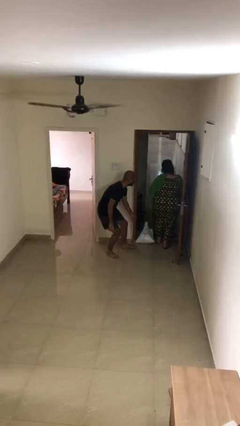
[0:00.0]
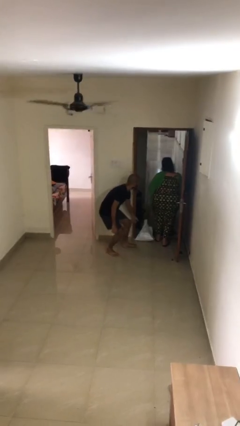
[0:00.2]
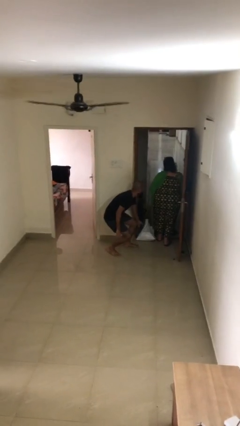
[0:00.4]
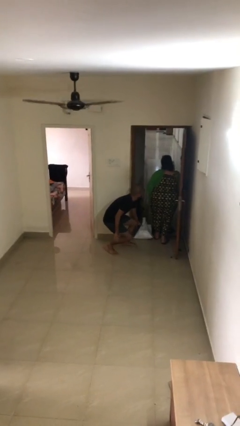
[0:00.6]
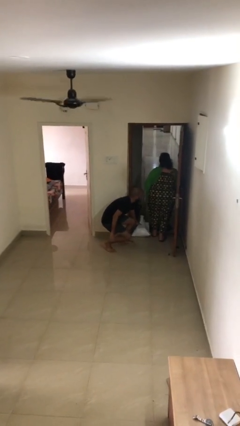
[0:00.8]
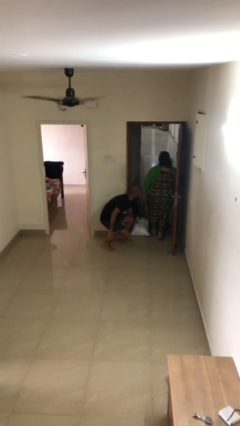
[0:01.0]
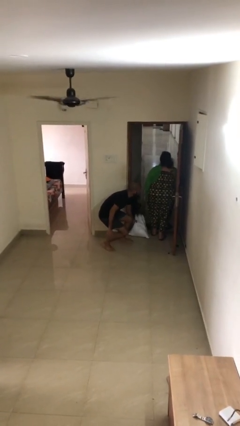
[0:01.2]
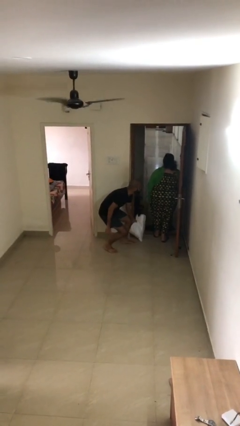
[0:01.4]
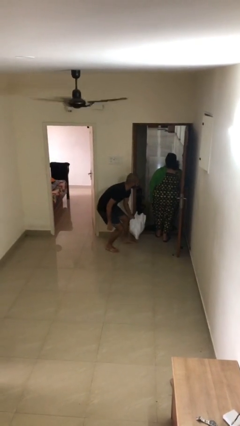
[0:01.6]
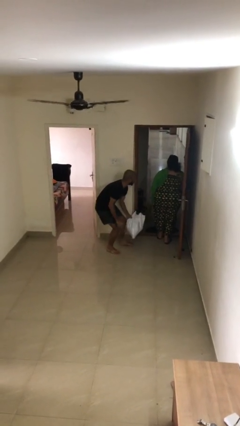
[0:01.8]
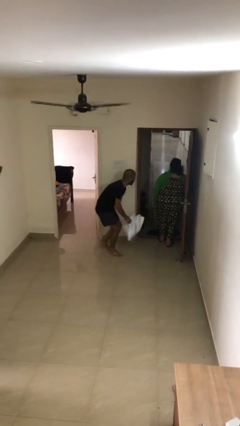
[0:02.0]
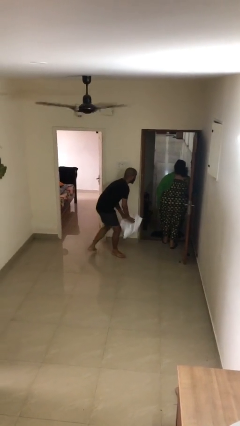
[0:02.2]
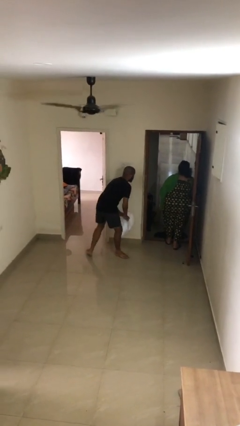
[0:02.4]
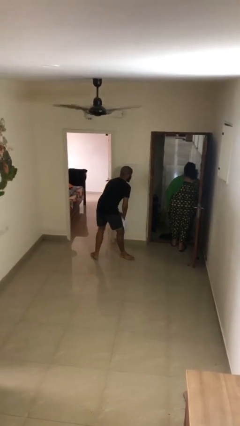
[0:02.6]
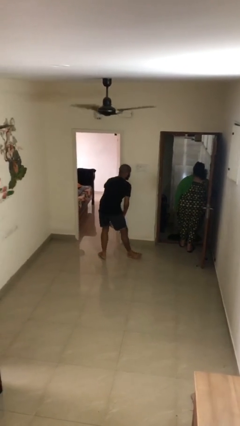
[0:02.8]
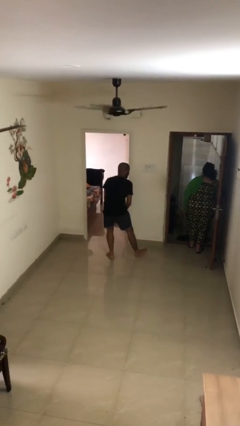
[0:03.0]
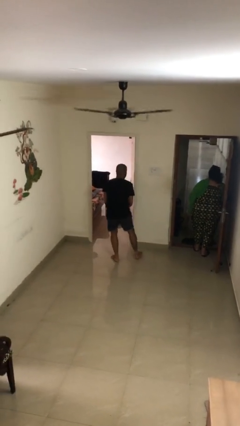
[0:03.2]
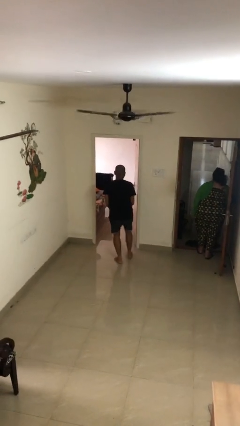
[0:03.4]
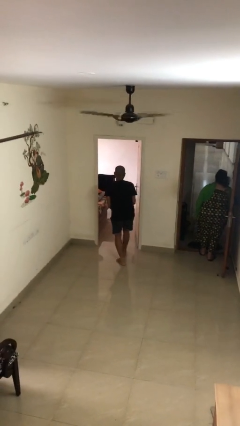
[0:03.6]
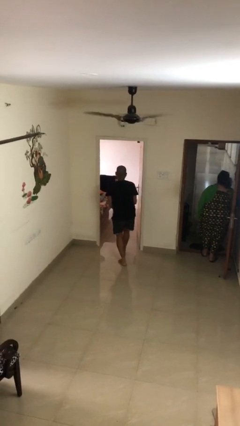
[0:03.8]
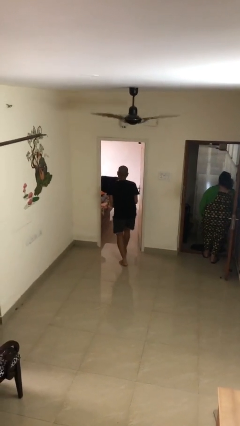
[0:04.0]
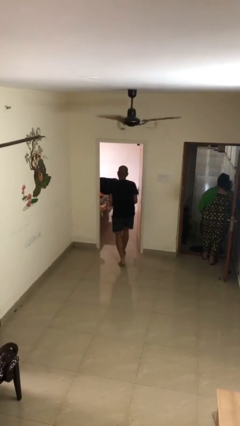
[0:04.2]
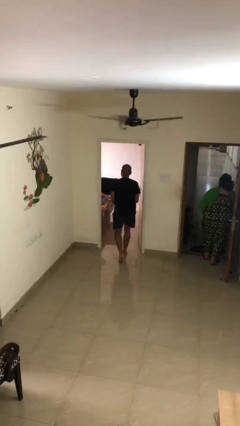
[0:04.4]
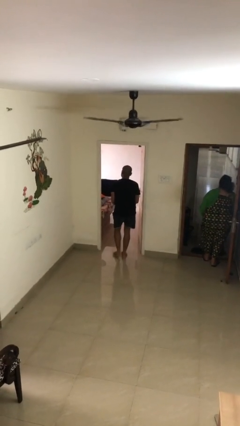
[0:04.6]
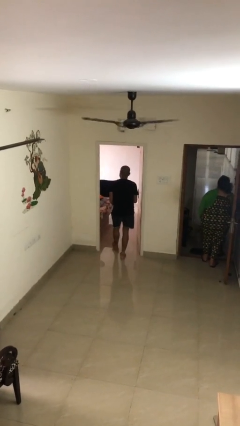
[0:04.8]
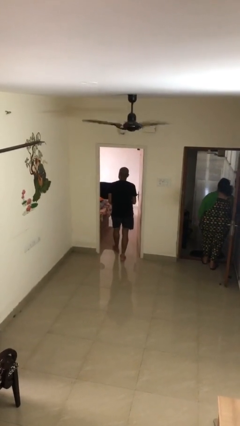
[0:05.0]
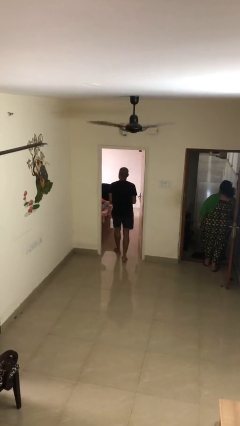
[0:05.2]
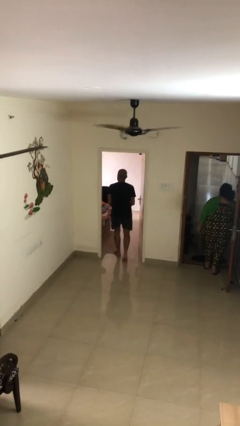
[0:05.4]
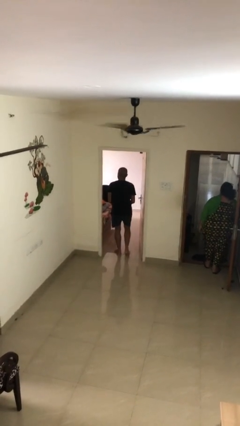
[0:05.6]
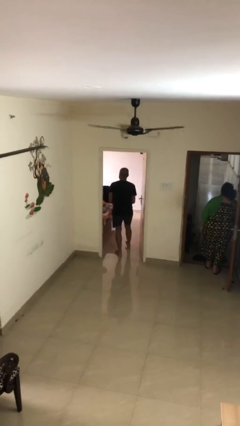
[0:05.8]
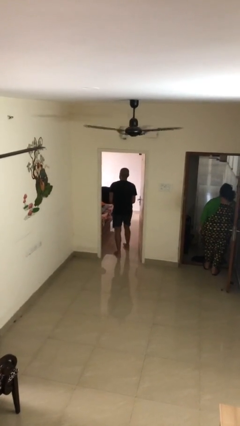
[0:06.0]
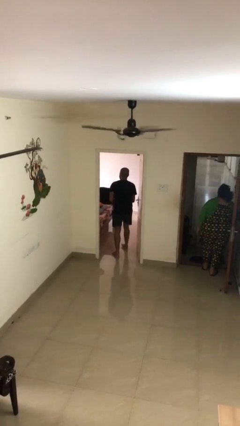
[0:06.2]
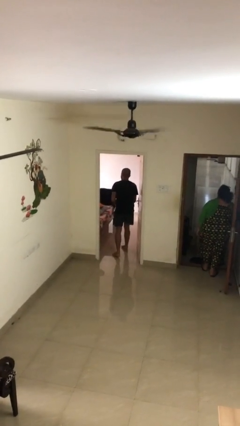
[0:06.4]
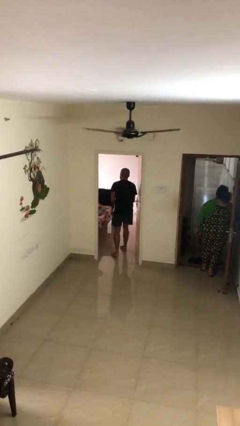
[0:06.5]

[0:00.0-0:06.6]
person steals object from person

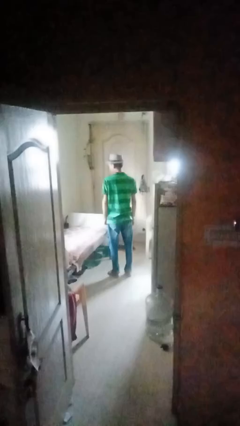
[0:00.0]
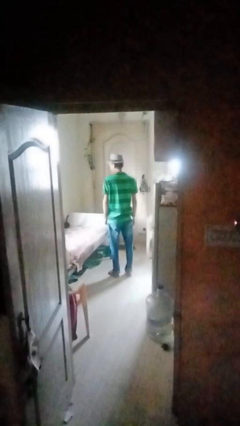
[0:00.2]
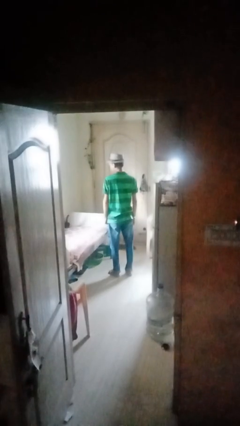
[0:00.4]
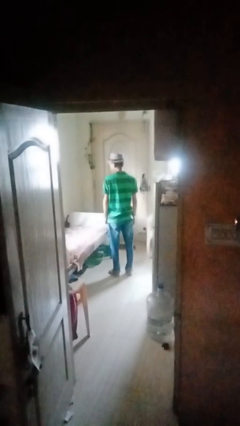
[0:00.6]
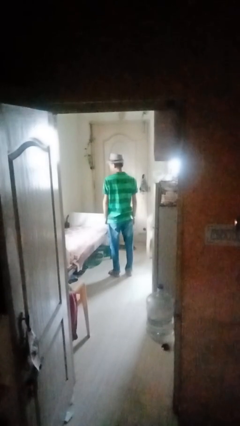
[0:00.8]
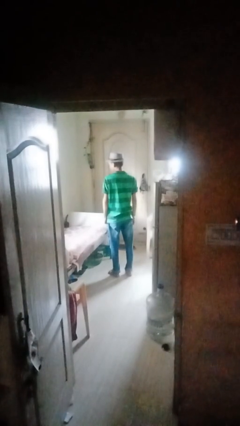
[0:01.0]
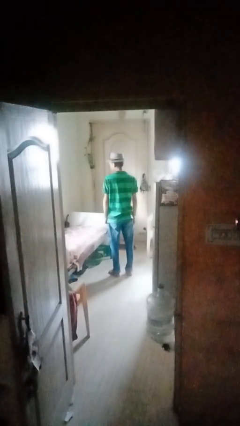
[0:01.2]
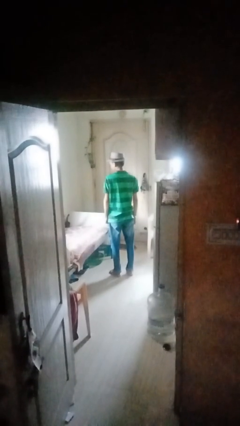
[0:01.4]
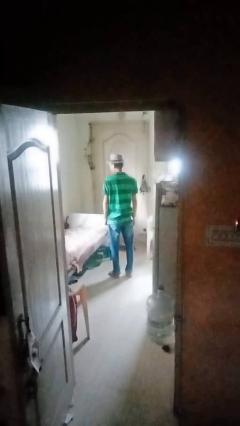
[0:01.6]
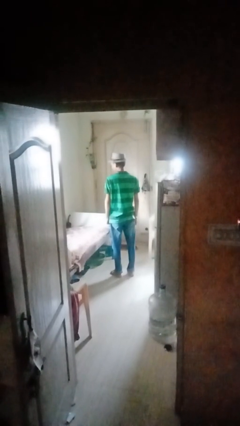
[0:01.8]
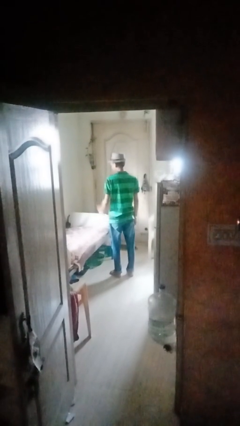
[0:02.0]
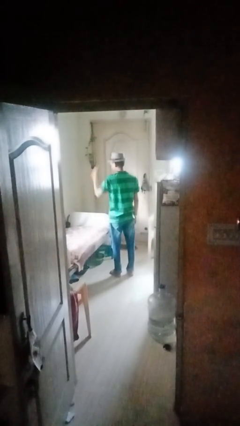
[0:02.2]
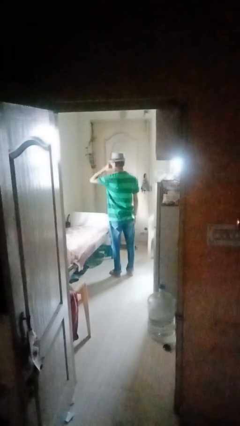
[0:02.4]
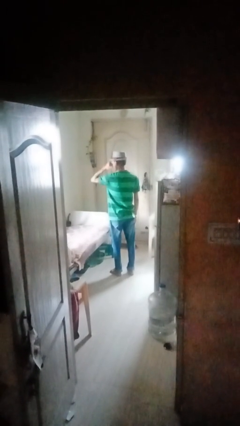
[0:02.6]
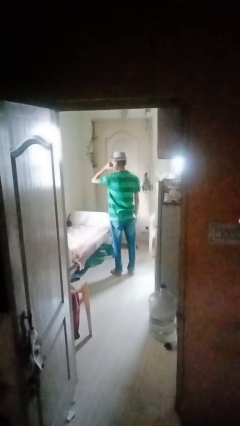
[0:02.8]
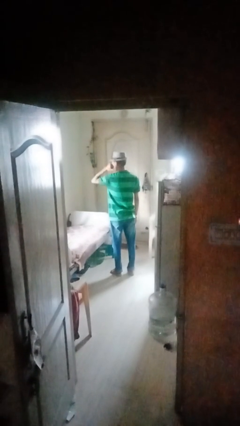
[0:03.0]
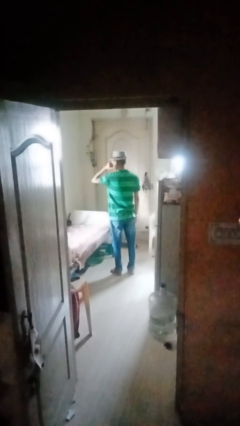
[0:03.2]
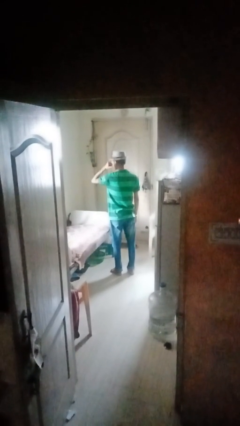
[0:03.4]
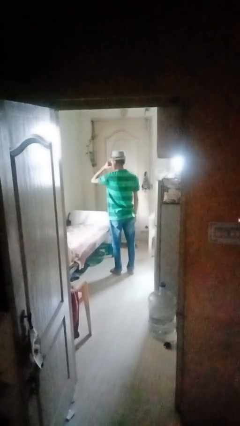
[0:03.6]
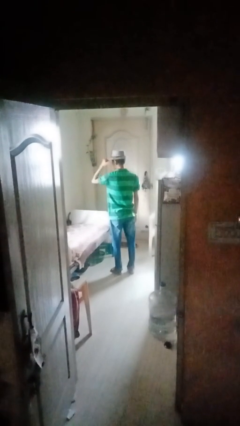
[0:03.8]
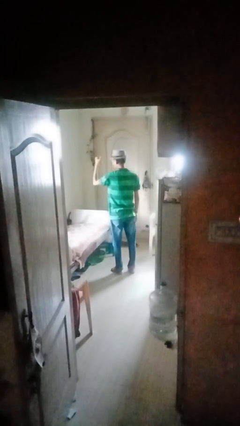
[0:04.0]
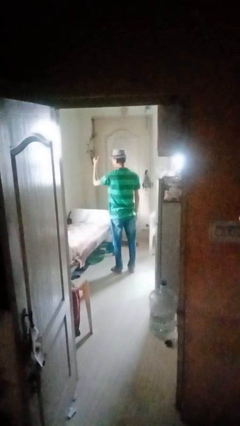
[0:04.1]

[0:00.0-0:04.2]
person gestures behind me

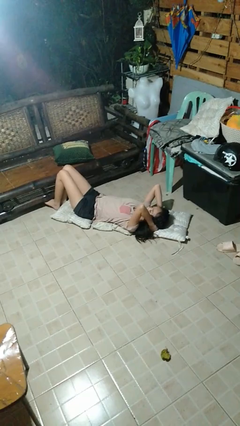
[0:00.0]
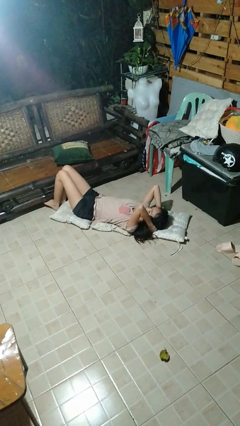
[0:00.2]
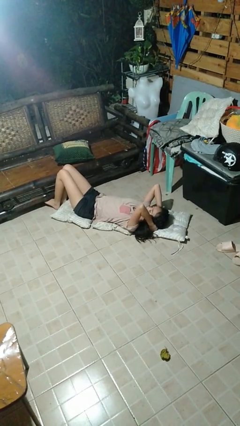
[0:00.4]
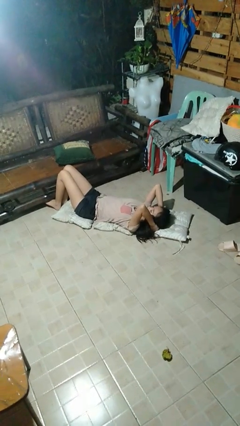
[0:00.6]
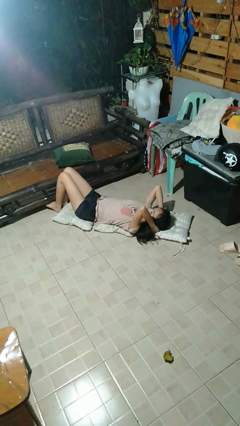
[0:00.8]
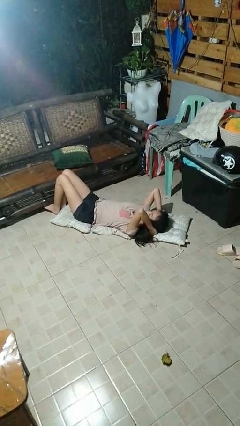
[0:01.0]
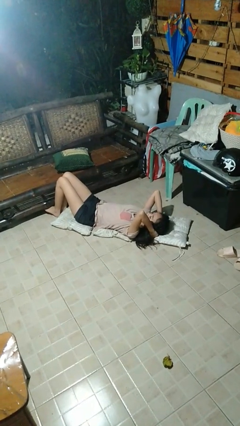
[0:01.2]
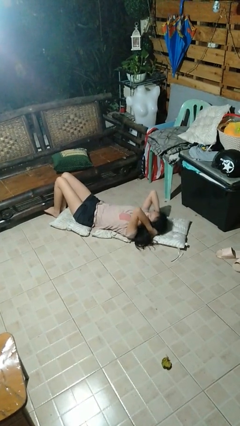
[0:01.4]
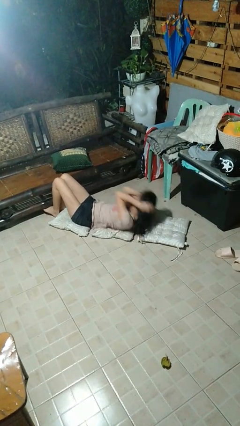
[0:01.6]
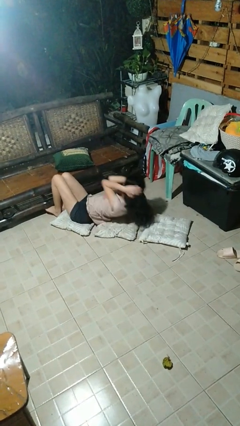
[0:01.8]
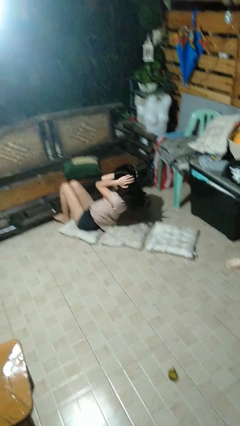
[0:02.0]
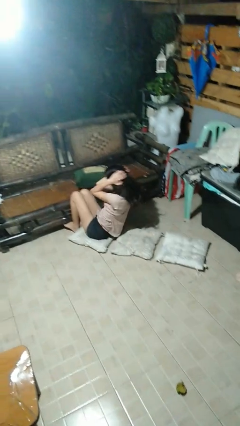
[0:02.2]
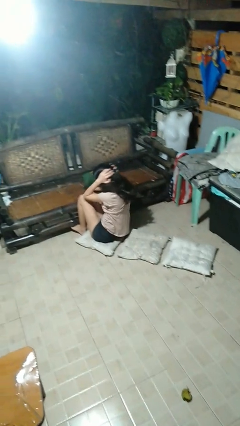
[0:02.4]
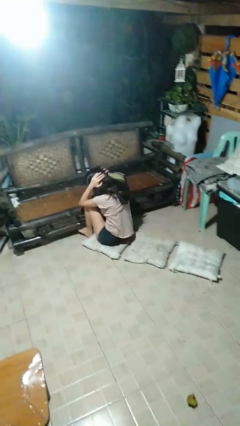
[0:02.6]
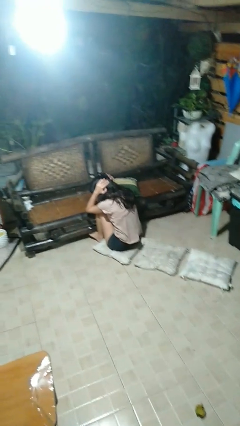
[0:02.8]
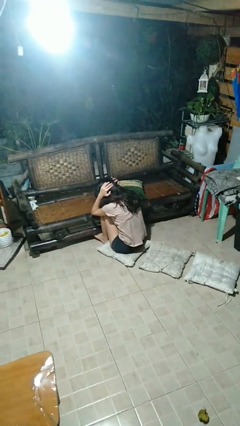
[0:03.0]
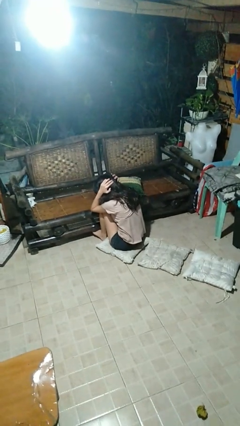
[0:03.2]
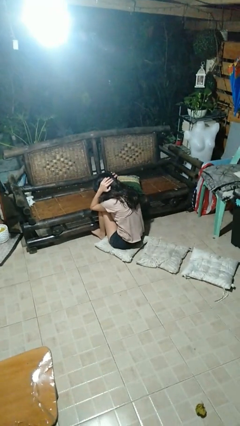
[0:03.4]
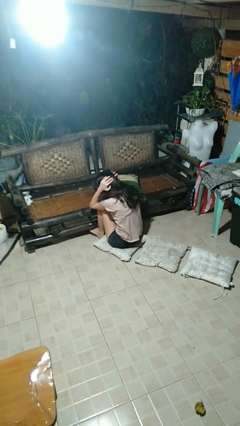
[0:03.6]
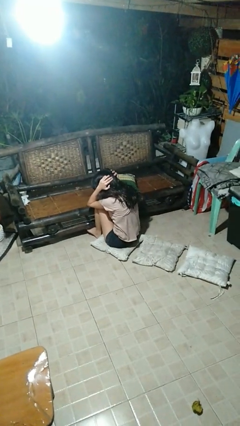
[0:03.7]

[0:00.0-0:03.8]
person exercises with situp

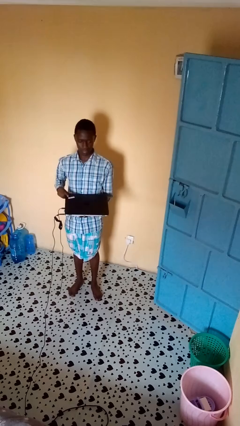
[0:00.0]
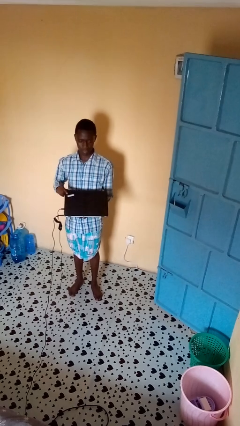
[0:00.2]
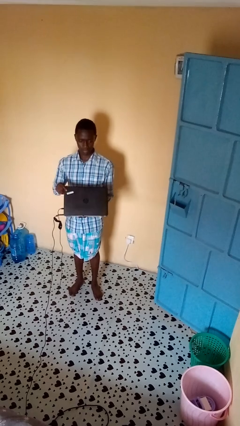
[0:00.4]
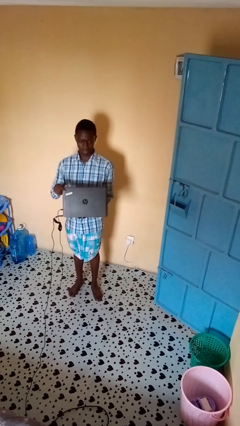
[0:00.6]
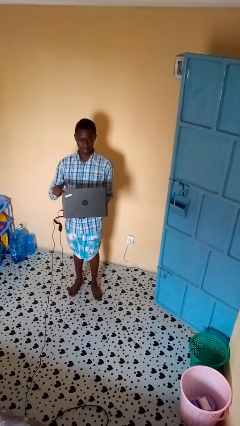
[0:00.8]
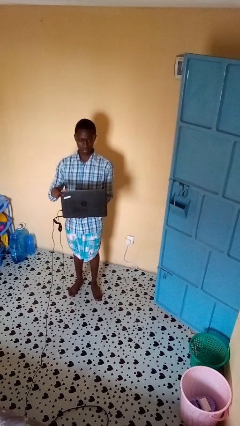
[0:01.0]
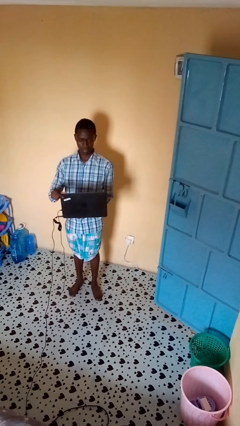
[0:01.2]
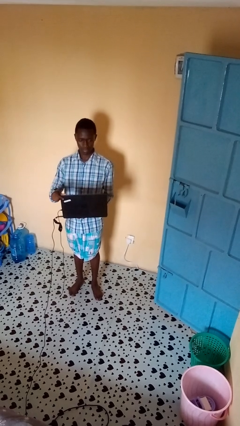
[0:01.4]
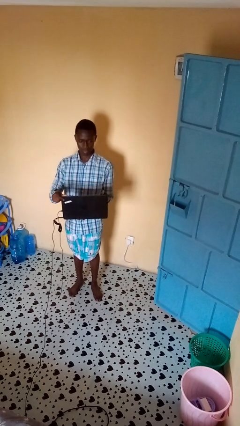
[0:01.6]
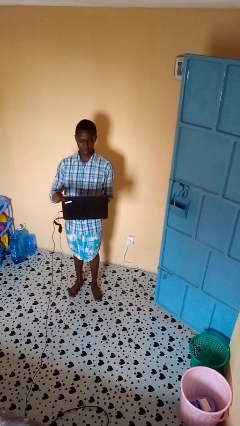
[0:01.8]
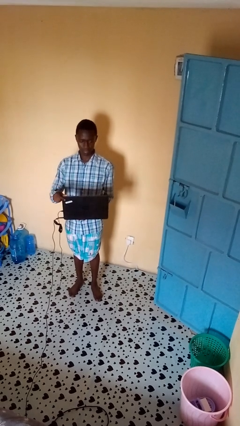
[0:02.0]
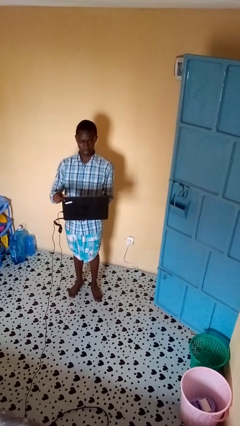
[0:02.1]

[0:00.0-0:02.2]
person opens laptop

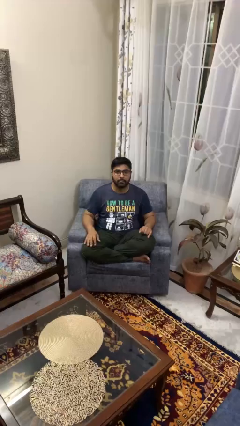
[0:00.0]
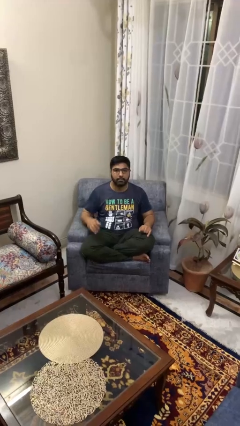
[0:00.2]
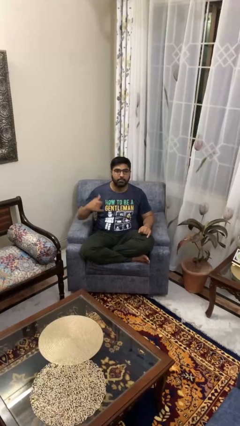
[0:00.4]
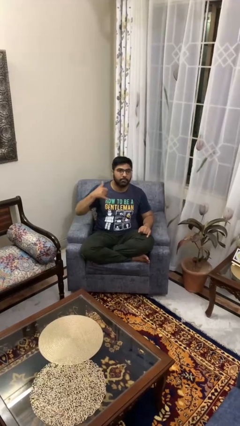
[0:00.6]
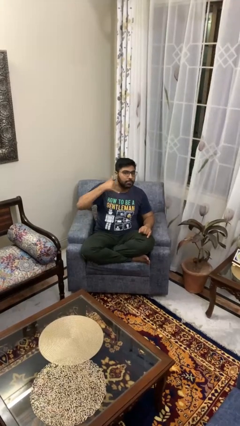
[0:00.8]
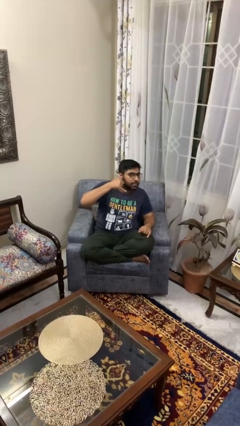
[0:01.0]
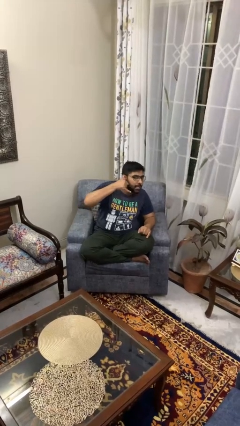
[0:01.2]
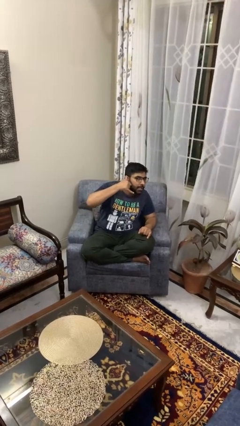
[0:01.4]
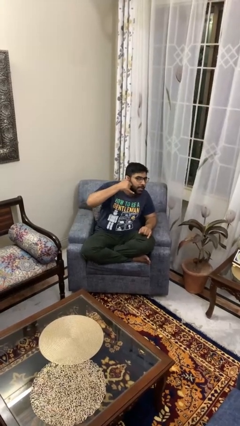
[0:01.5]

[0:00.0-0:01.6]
person gestures call me
